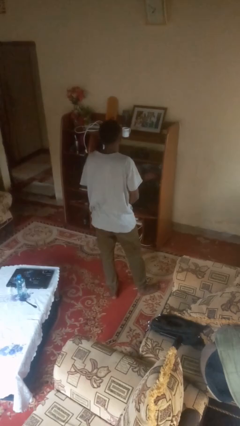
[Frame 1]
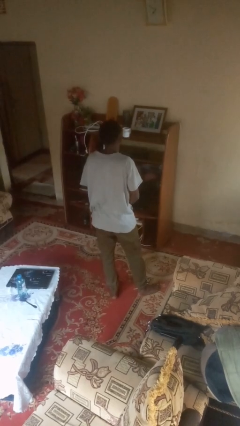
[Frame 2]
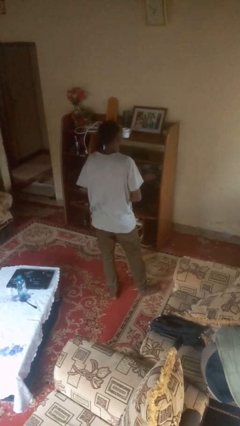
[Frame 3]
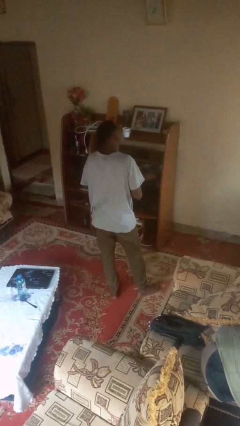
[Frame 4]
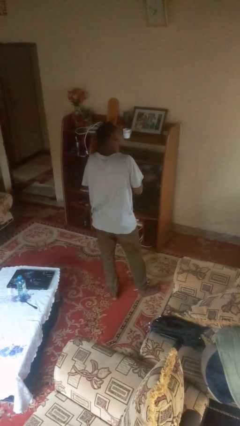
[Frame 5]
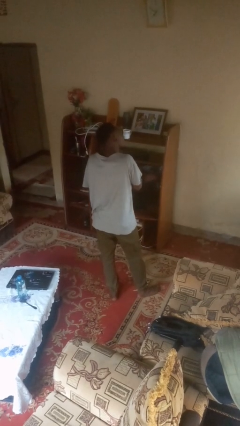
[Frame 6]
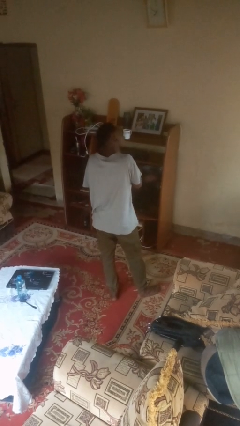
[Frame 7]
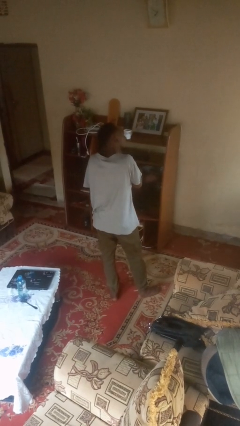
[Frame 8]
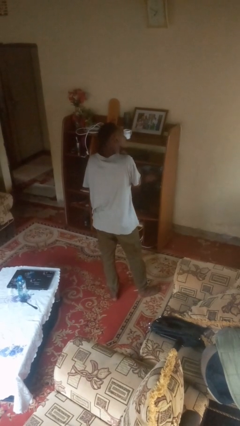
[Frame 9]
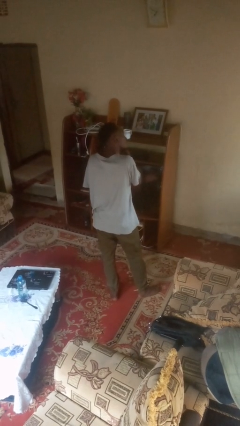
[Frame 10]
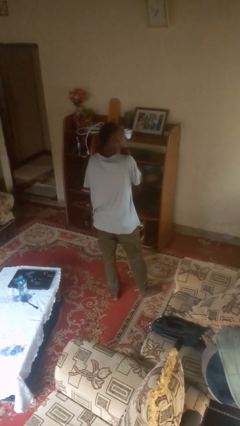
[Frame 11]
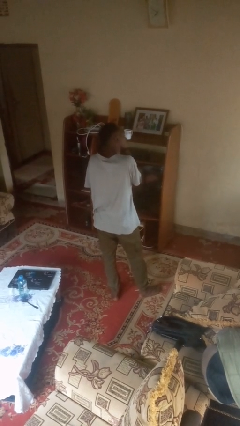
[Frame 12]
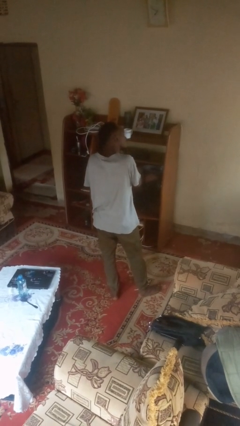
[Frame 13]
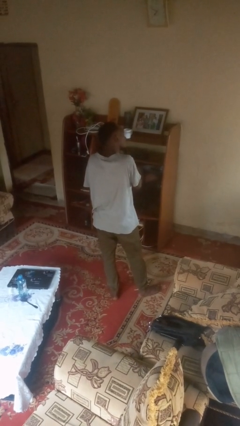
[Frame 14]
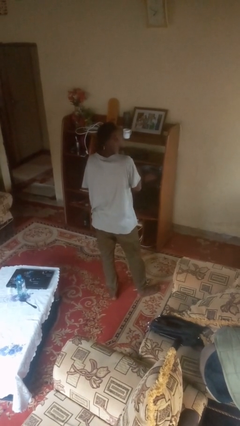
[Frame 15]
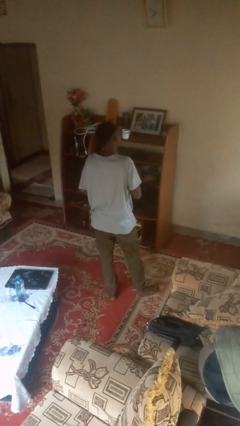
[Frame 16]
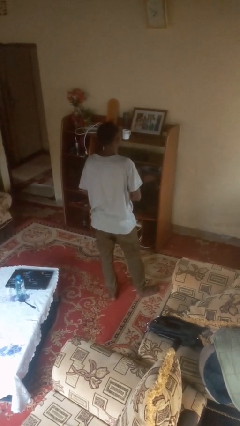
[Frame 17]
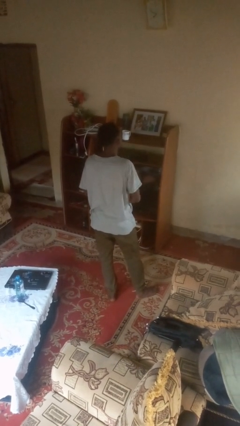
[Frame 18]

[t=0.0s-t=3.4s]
person puts on earrings

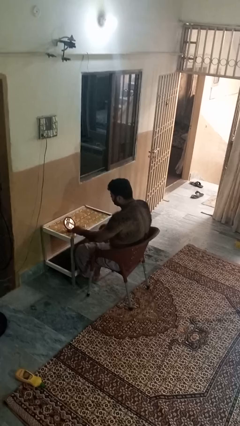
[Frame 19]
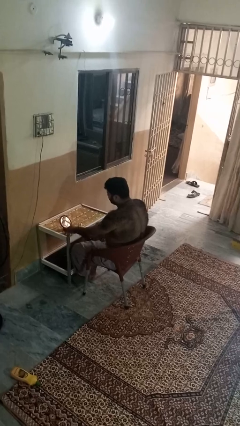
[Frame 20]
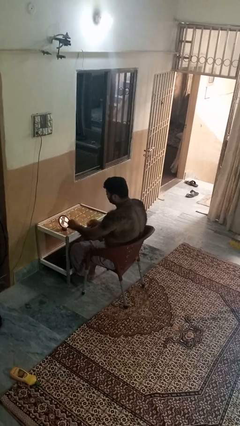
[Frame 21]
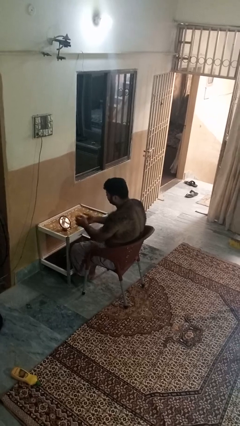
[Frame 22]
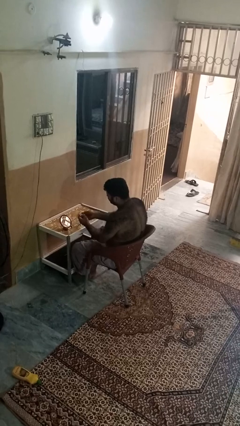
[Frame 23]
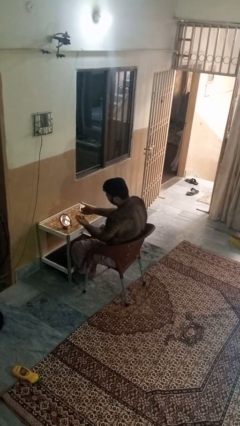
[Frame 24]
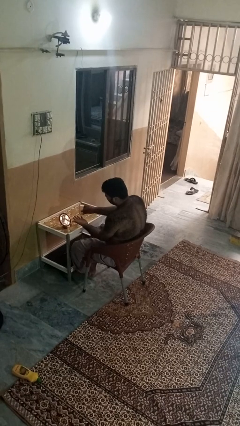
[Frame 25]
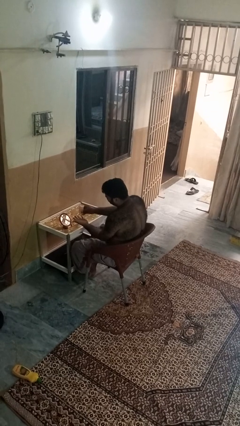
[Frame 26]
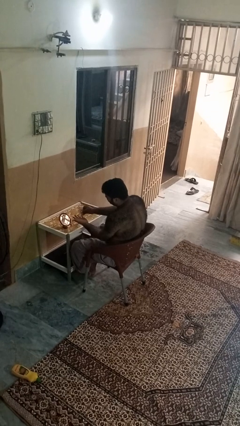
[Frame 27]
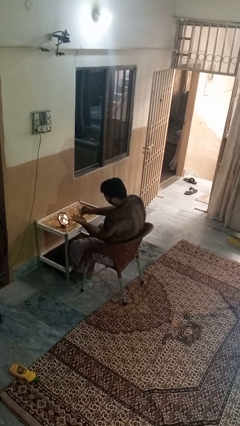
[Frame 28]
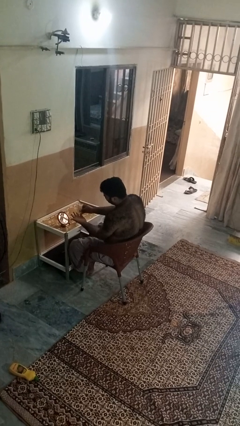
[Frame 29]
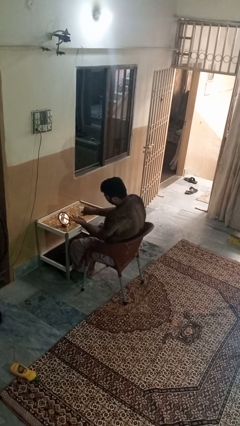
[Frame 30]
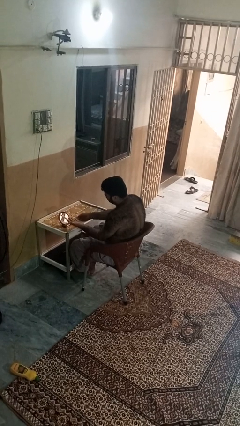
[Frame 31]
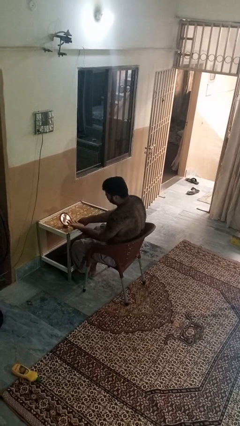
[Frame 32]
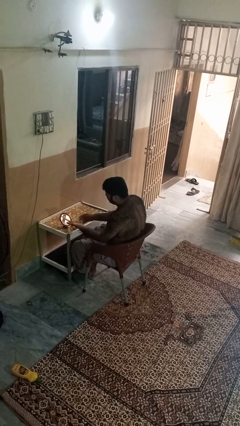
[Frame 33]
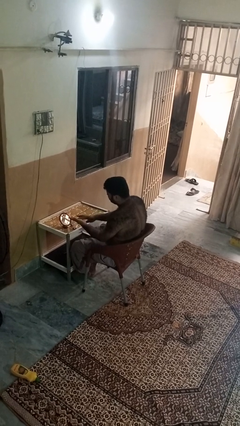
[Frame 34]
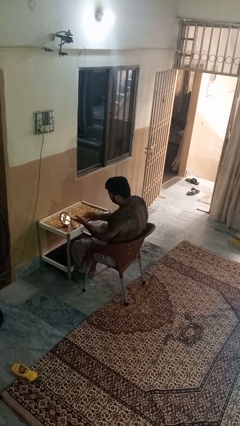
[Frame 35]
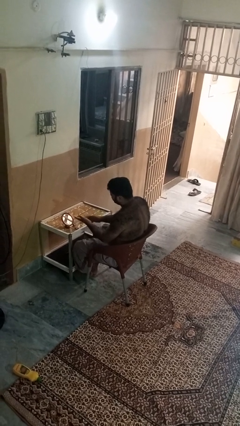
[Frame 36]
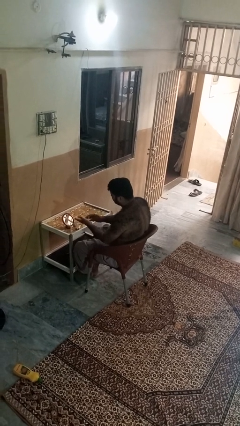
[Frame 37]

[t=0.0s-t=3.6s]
person applies foundation makeup

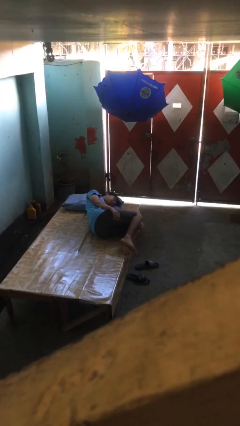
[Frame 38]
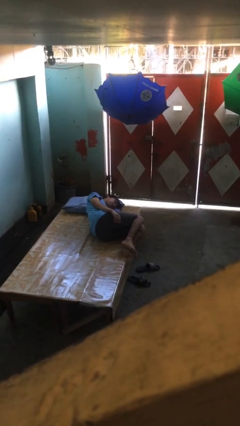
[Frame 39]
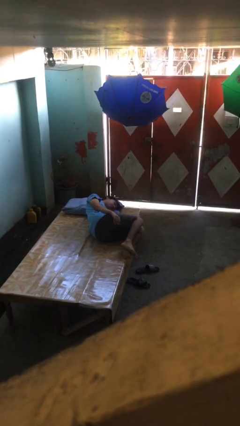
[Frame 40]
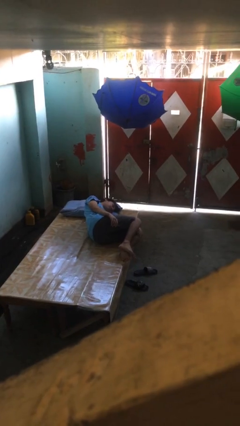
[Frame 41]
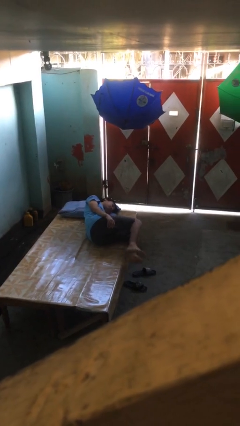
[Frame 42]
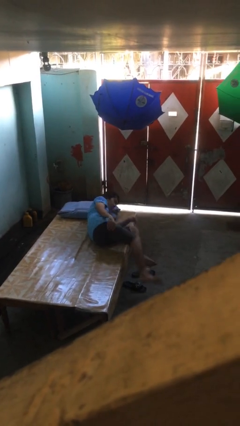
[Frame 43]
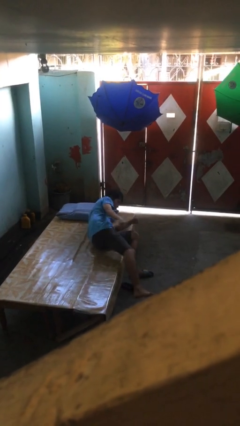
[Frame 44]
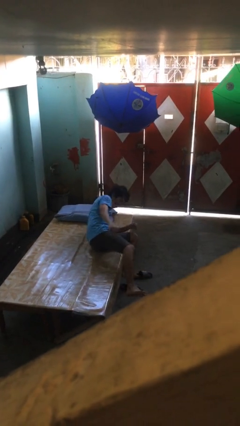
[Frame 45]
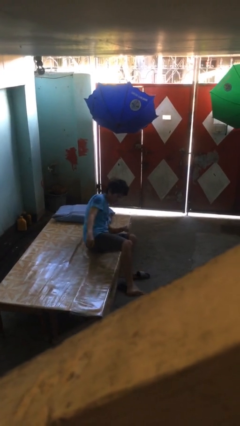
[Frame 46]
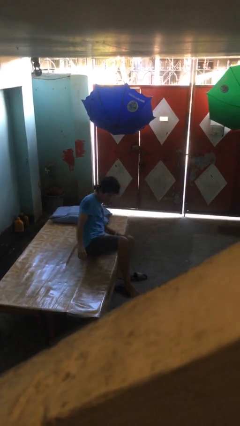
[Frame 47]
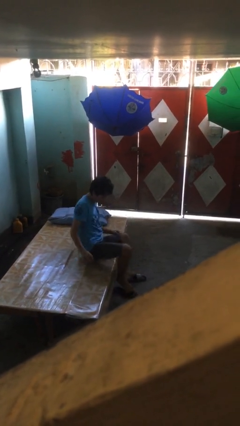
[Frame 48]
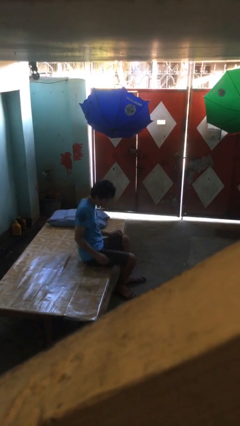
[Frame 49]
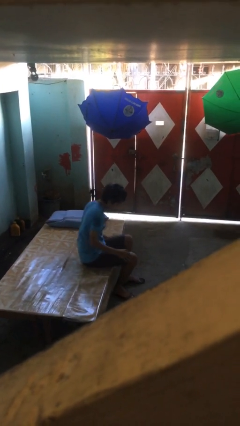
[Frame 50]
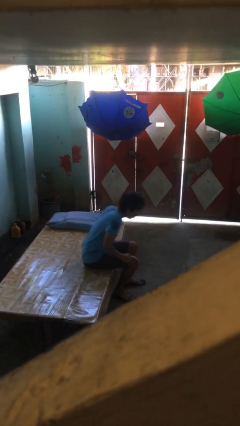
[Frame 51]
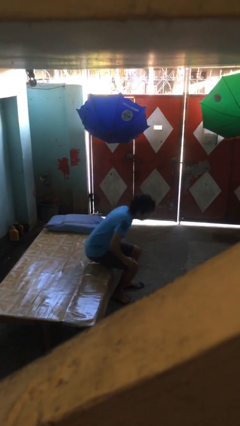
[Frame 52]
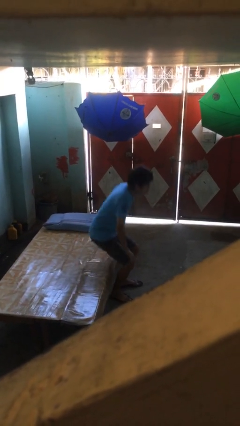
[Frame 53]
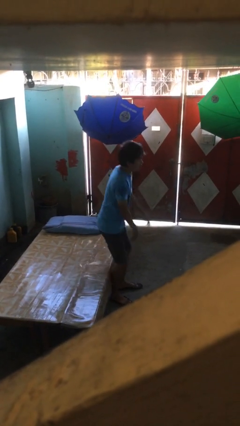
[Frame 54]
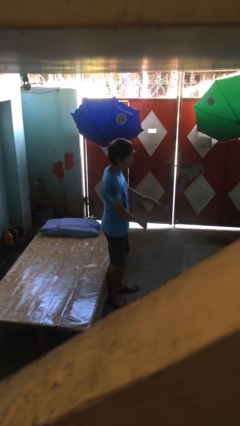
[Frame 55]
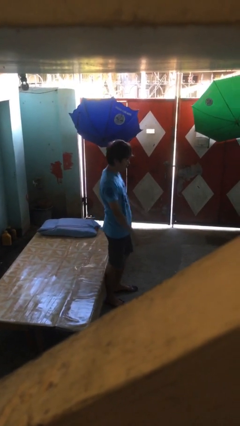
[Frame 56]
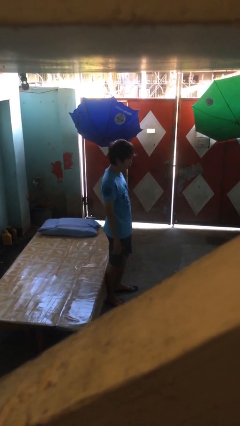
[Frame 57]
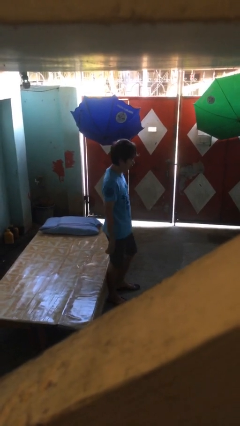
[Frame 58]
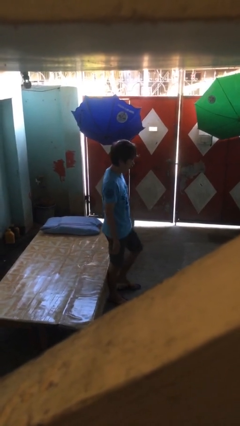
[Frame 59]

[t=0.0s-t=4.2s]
person stands up

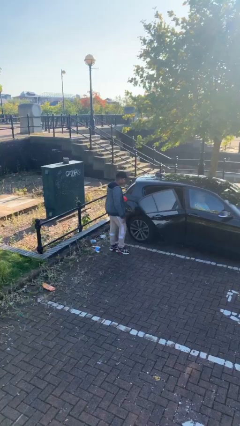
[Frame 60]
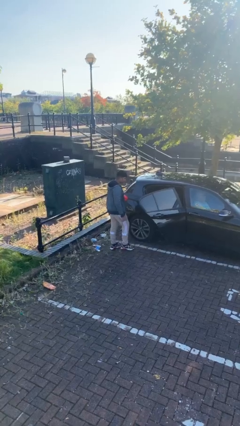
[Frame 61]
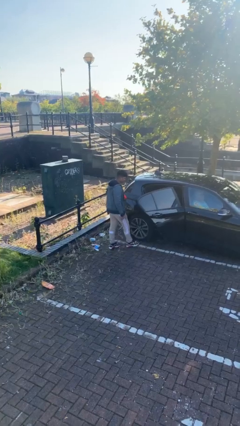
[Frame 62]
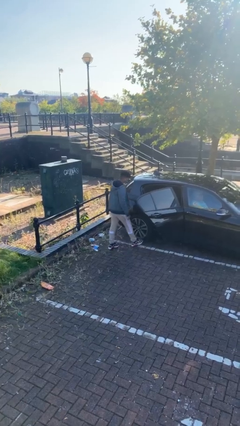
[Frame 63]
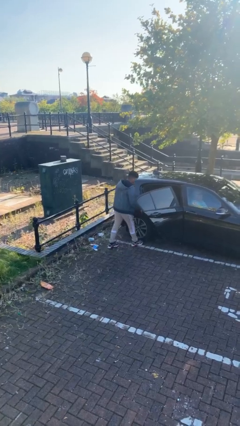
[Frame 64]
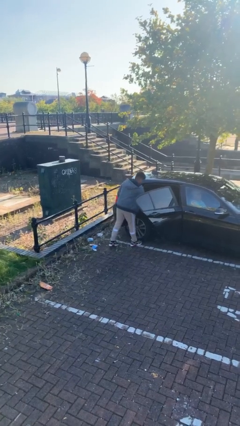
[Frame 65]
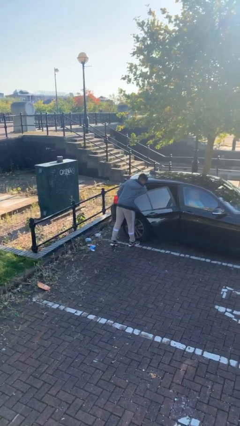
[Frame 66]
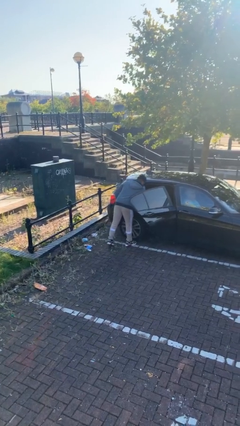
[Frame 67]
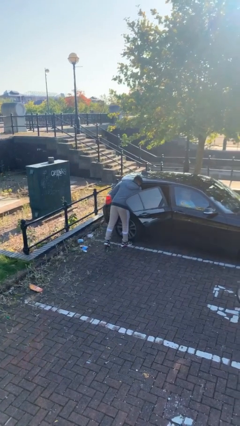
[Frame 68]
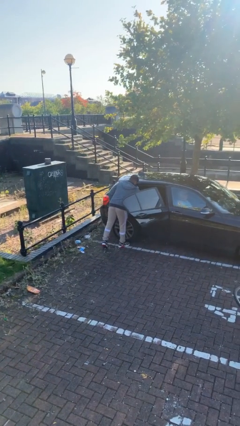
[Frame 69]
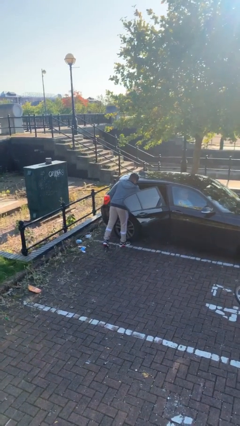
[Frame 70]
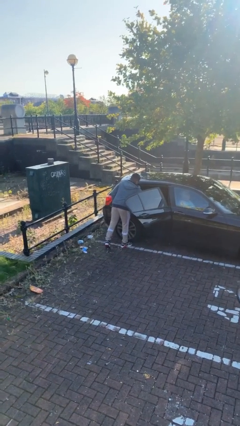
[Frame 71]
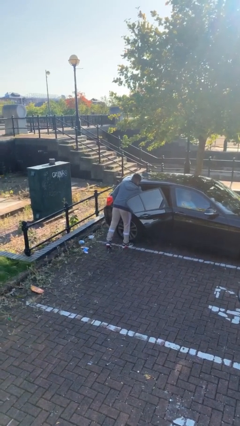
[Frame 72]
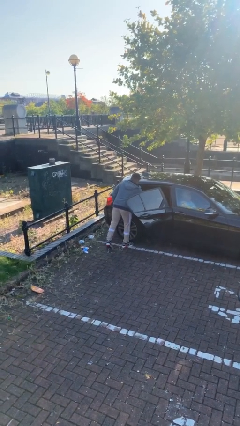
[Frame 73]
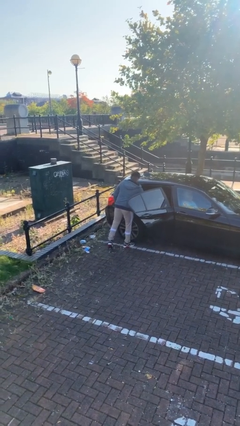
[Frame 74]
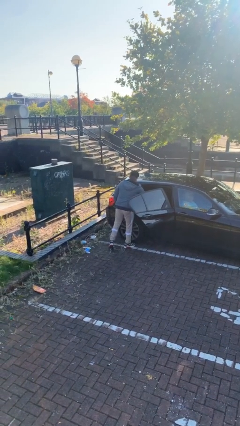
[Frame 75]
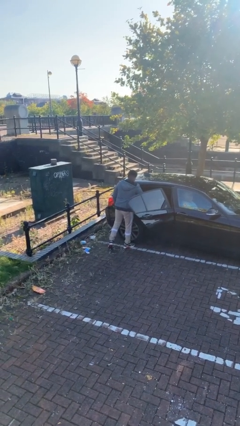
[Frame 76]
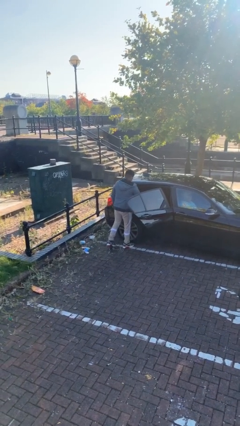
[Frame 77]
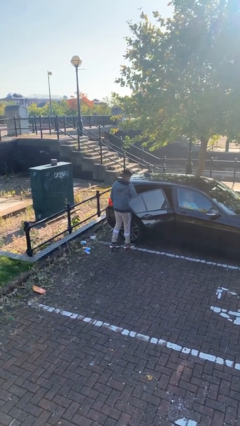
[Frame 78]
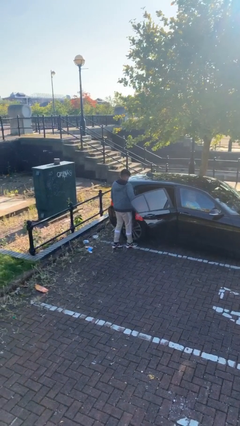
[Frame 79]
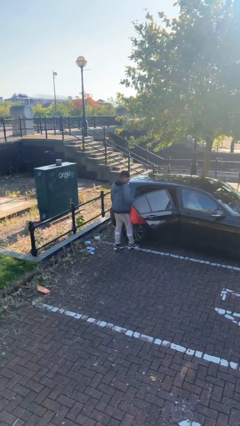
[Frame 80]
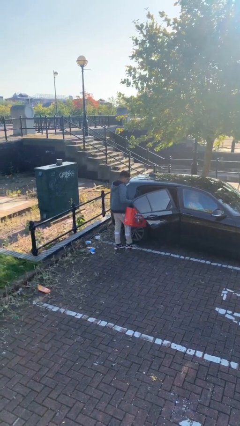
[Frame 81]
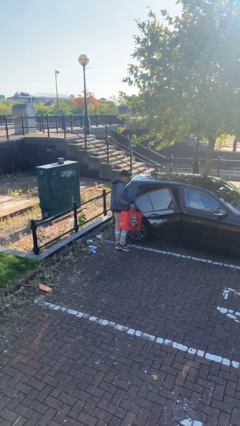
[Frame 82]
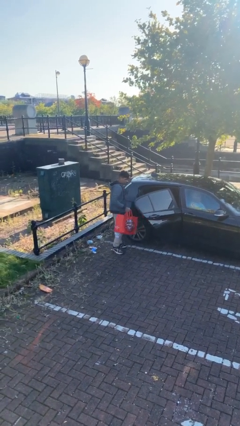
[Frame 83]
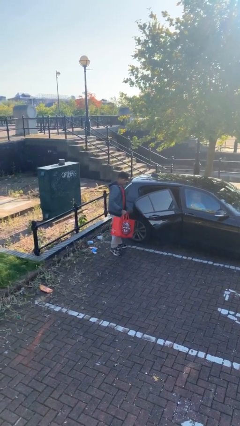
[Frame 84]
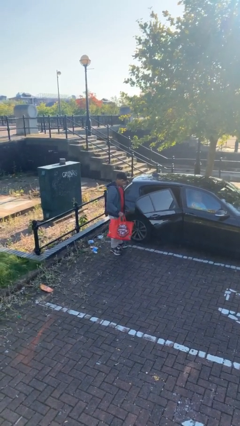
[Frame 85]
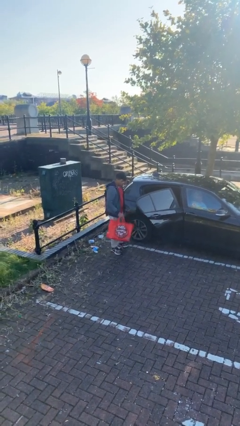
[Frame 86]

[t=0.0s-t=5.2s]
person unloads car

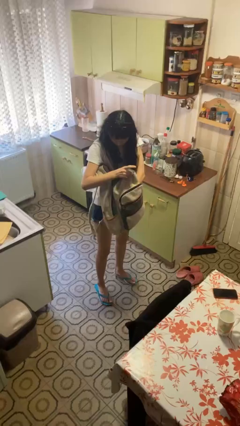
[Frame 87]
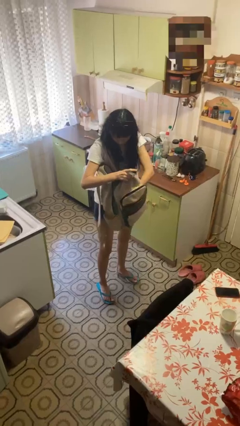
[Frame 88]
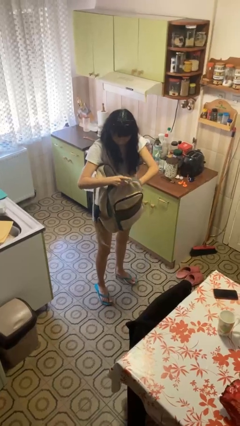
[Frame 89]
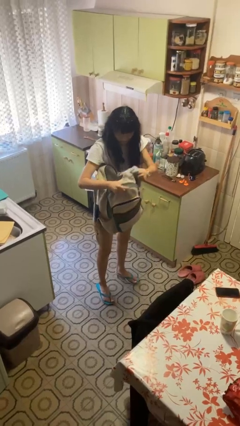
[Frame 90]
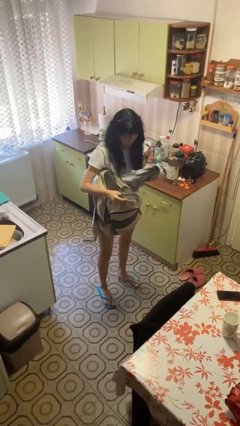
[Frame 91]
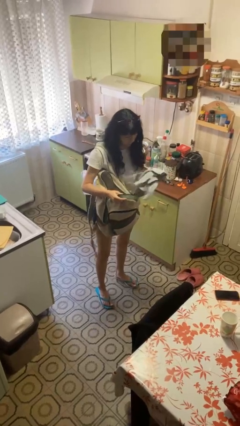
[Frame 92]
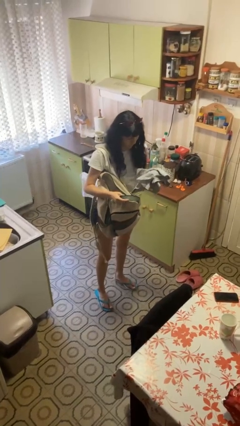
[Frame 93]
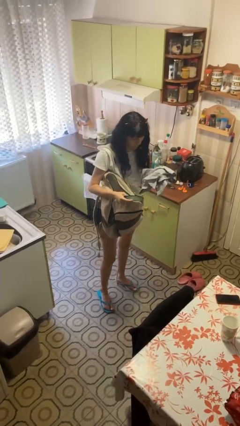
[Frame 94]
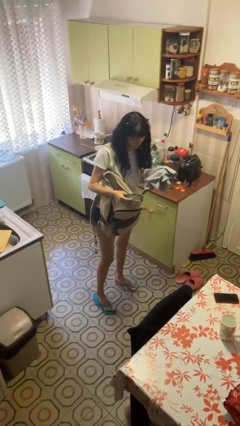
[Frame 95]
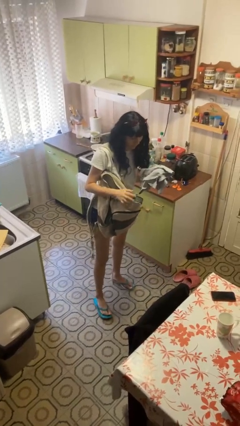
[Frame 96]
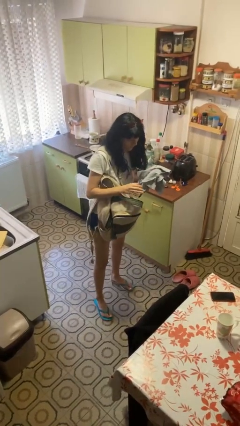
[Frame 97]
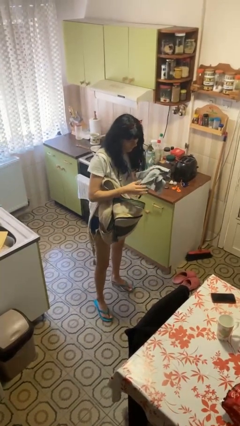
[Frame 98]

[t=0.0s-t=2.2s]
person takes object from backpack
